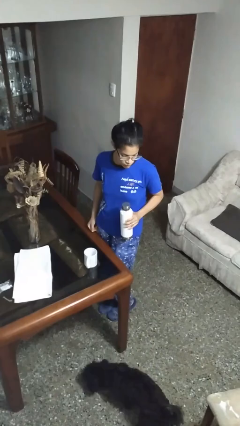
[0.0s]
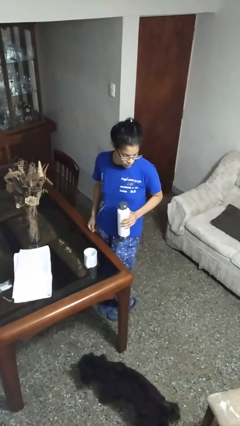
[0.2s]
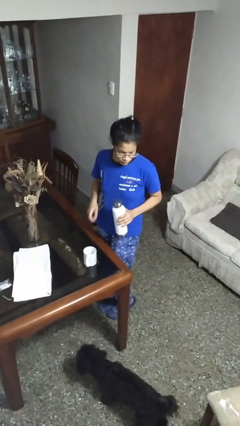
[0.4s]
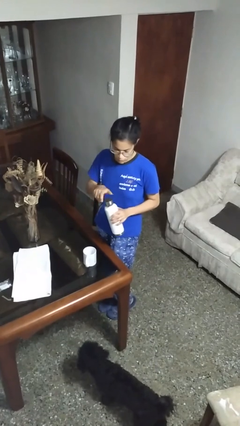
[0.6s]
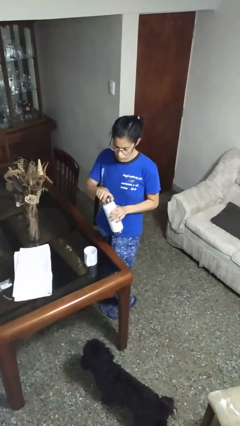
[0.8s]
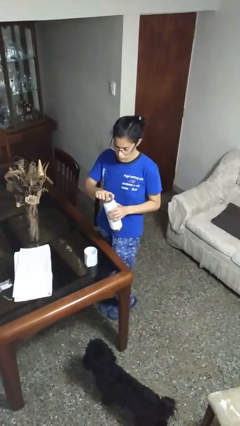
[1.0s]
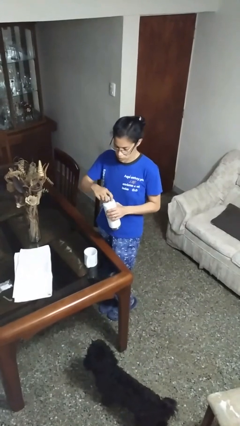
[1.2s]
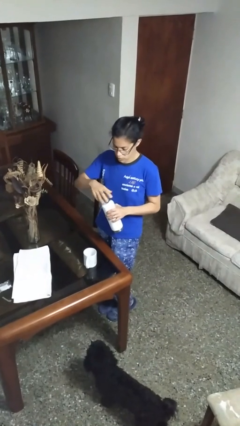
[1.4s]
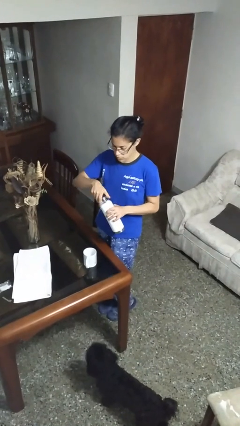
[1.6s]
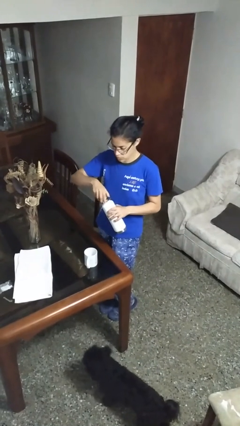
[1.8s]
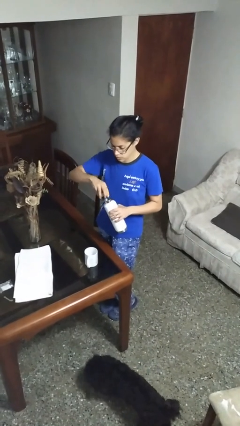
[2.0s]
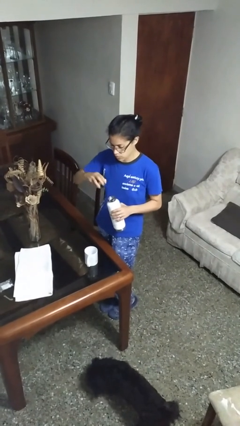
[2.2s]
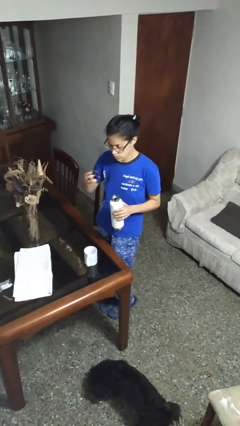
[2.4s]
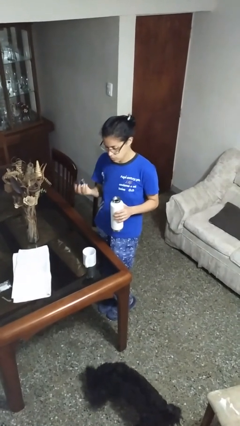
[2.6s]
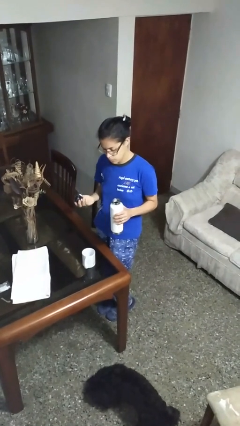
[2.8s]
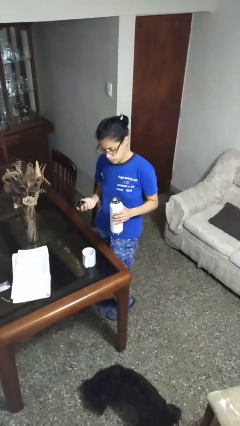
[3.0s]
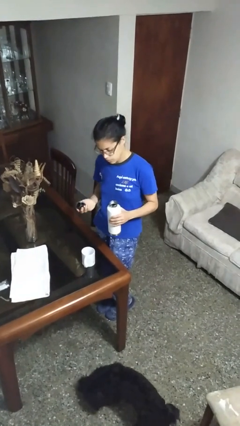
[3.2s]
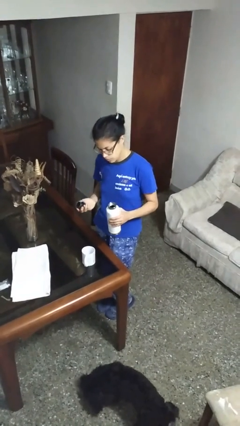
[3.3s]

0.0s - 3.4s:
person unscrews lid from bottle

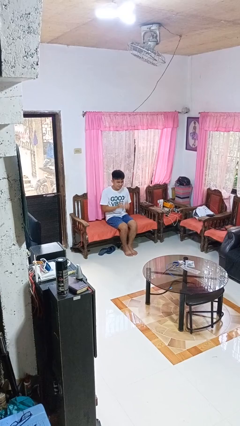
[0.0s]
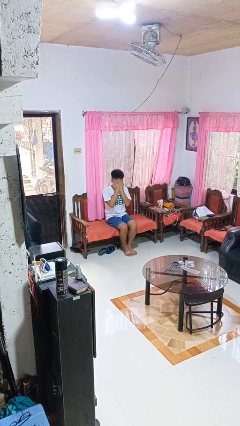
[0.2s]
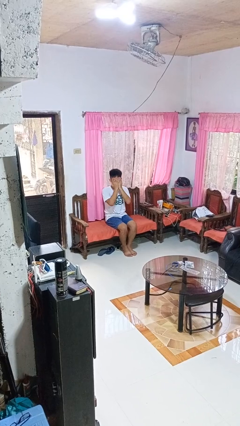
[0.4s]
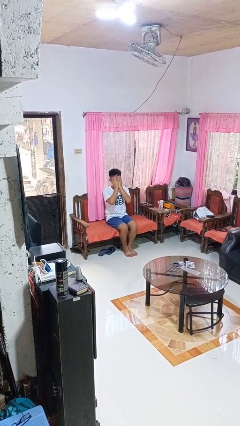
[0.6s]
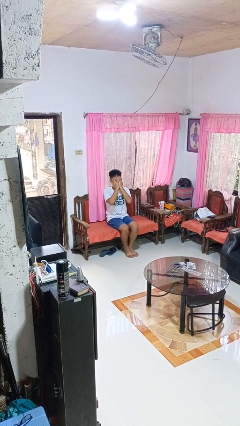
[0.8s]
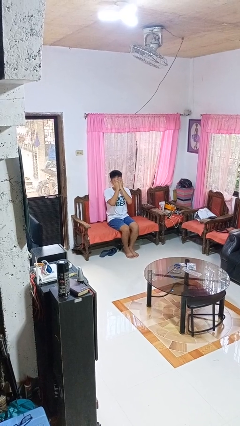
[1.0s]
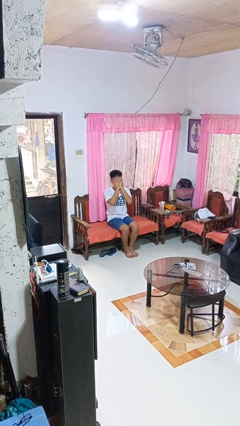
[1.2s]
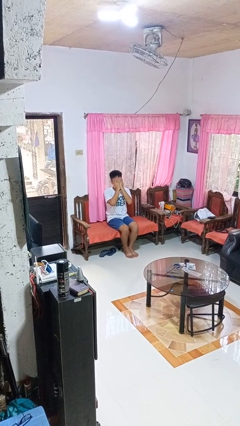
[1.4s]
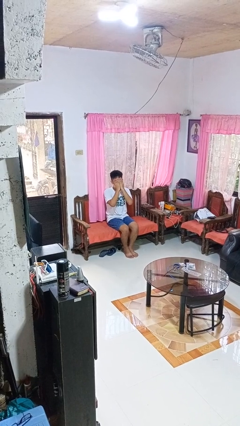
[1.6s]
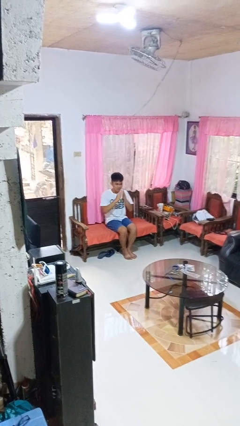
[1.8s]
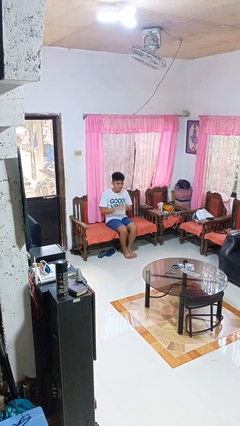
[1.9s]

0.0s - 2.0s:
person covers face with hands

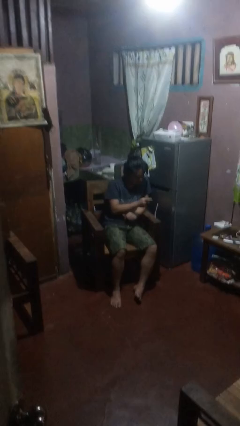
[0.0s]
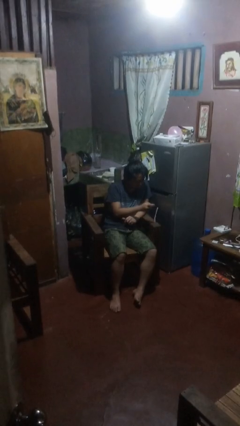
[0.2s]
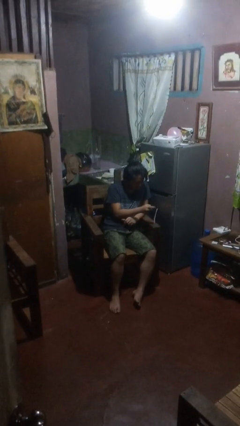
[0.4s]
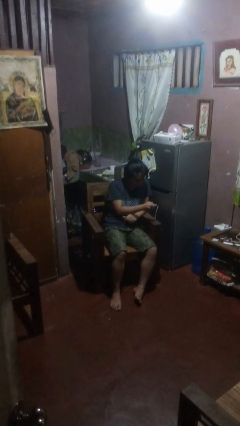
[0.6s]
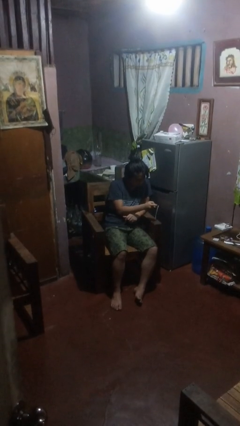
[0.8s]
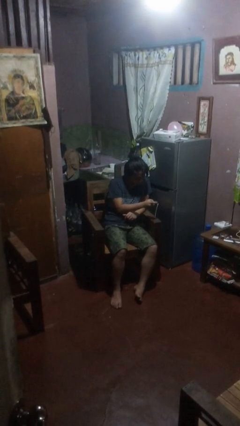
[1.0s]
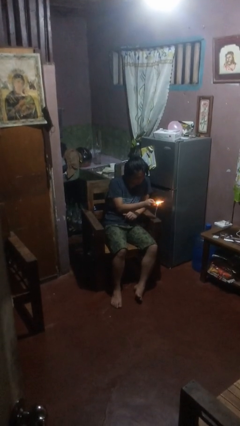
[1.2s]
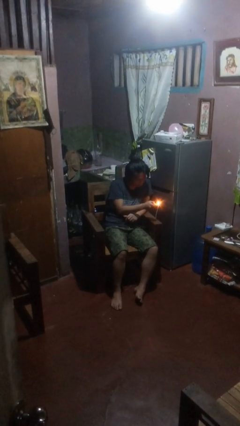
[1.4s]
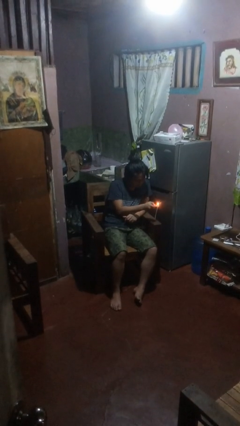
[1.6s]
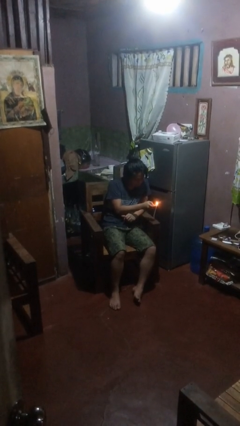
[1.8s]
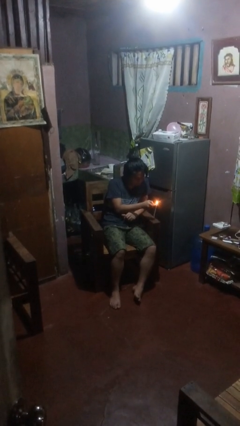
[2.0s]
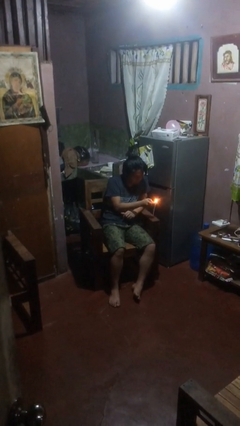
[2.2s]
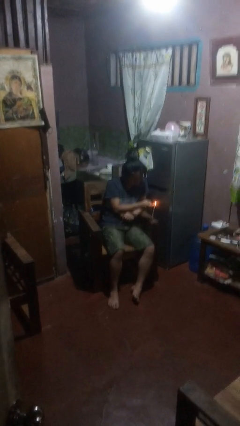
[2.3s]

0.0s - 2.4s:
person lights candle

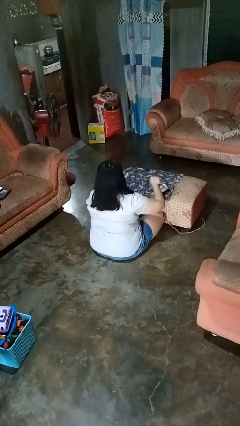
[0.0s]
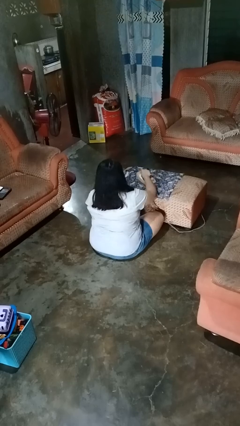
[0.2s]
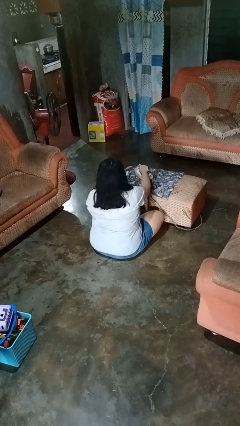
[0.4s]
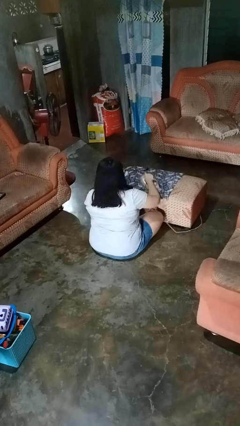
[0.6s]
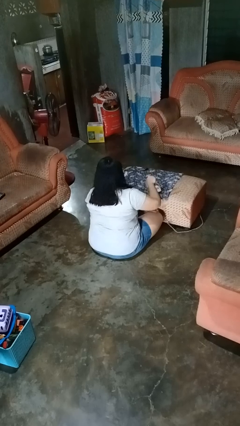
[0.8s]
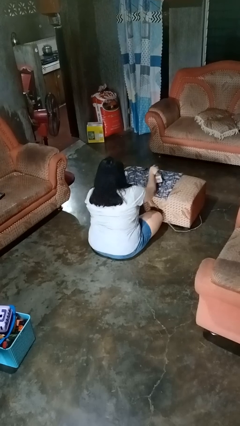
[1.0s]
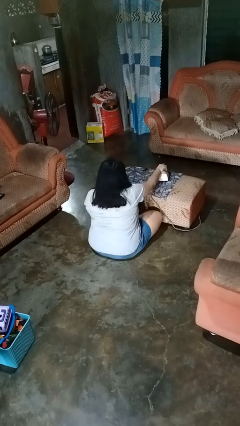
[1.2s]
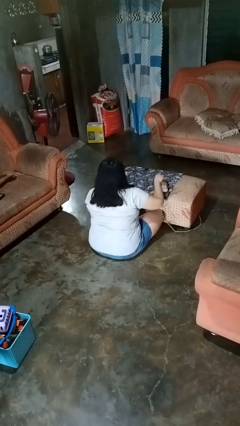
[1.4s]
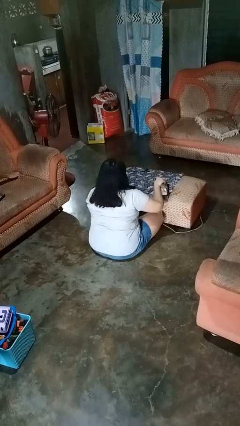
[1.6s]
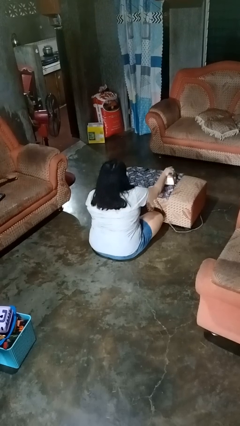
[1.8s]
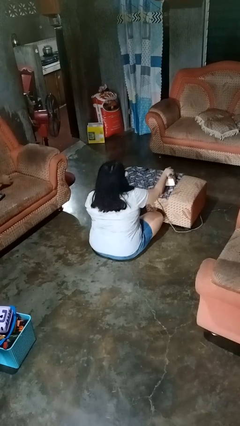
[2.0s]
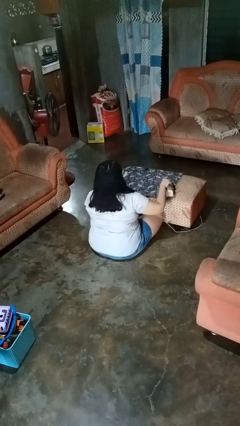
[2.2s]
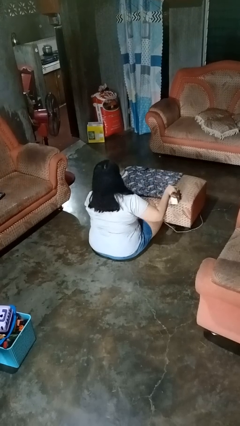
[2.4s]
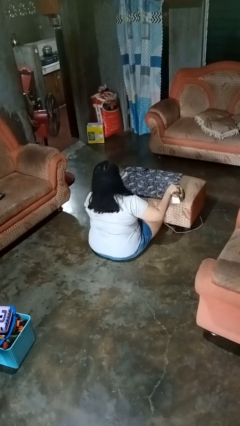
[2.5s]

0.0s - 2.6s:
person irons clothes

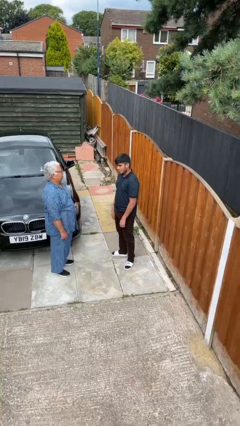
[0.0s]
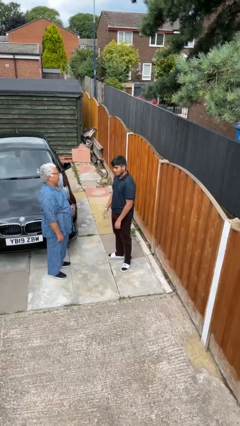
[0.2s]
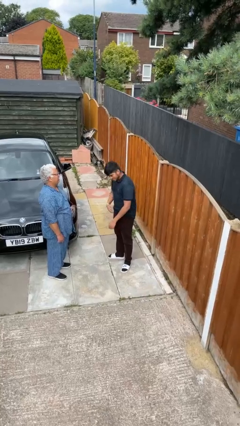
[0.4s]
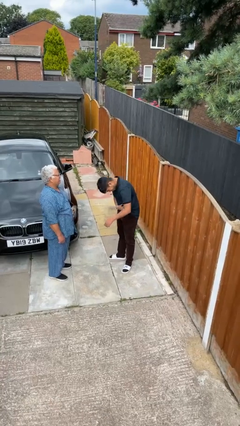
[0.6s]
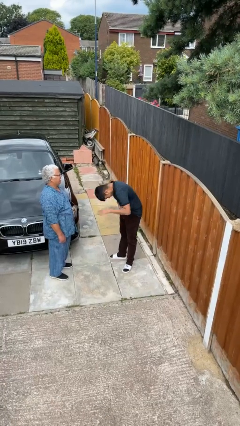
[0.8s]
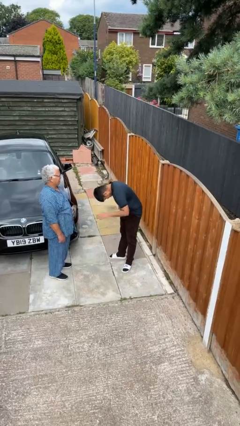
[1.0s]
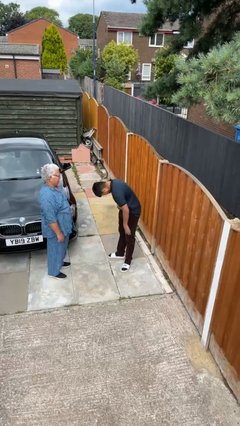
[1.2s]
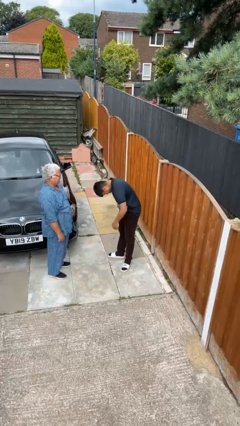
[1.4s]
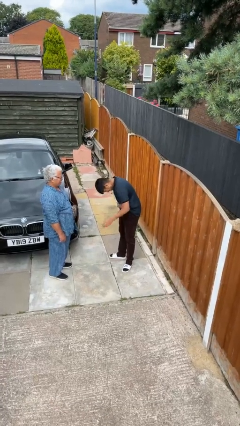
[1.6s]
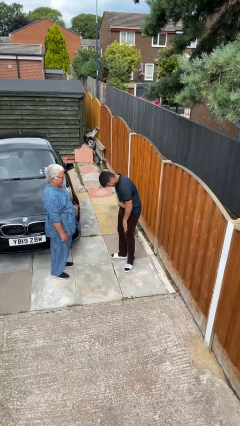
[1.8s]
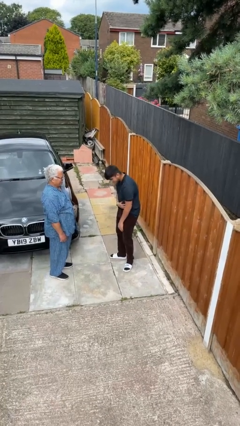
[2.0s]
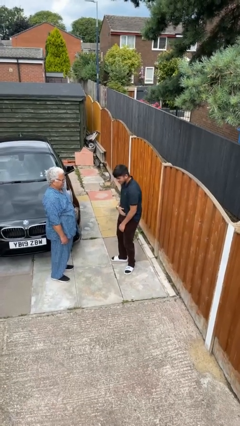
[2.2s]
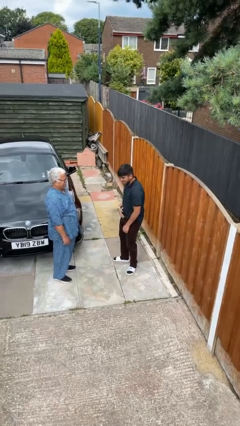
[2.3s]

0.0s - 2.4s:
person laughs with person

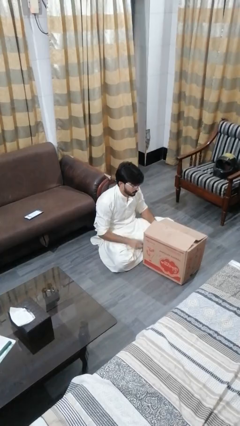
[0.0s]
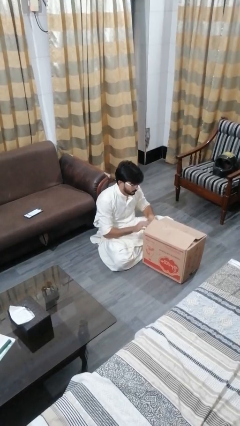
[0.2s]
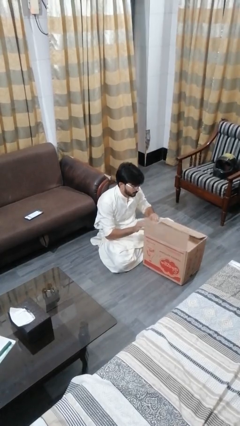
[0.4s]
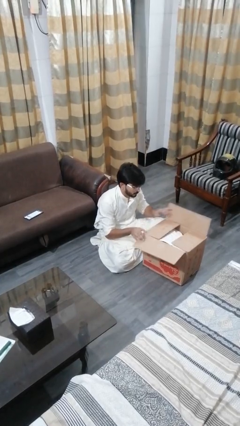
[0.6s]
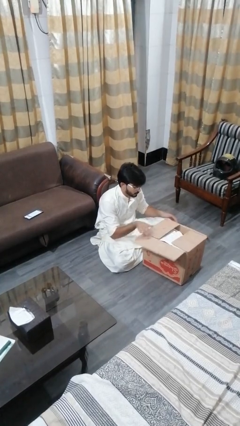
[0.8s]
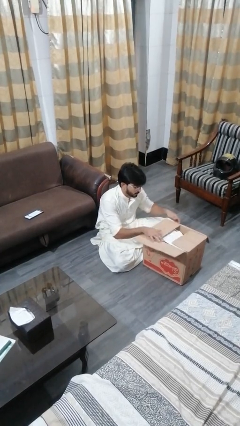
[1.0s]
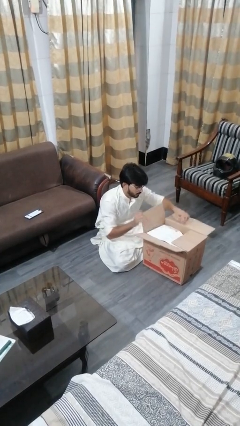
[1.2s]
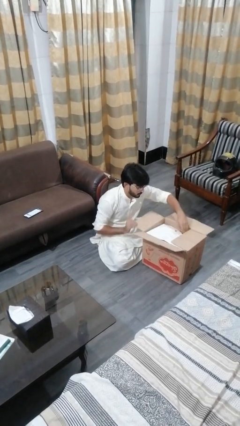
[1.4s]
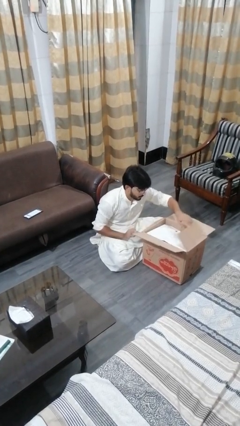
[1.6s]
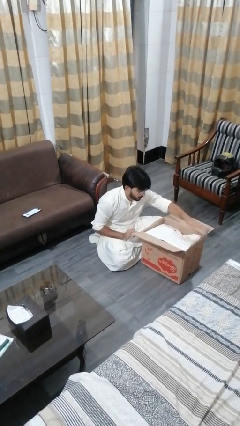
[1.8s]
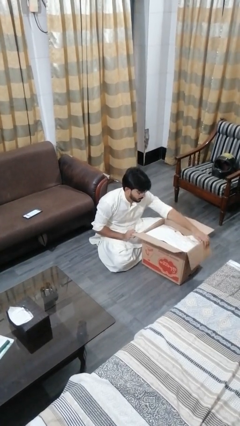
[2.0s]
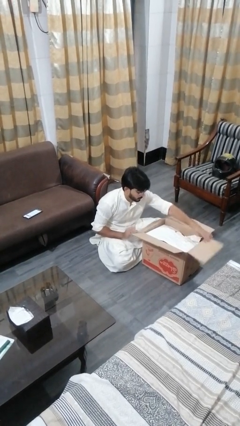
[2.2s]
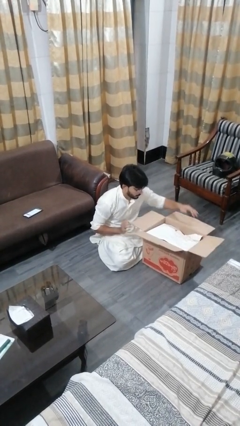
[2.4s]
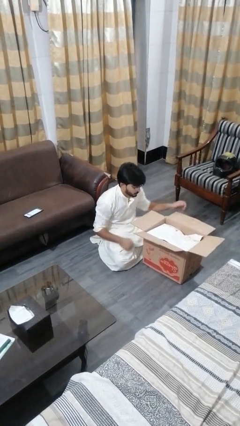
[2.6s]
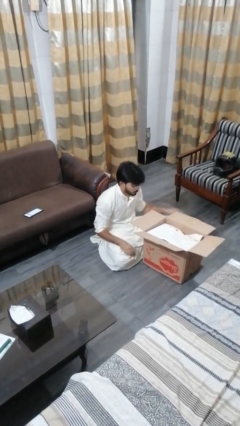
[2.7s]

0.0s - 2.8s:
person opens box

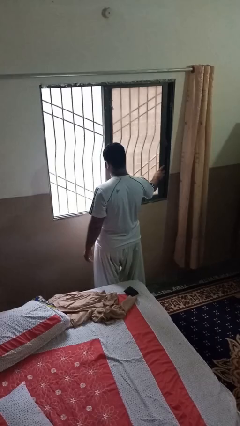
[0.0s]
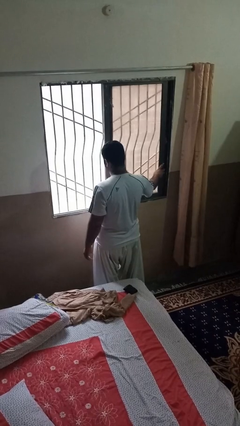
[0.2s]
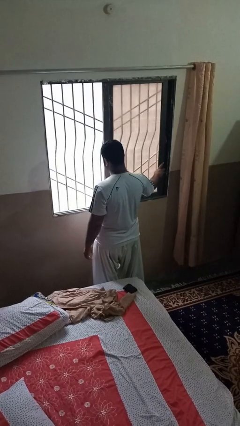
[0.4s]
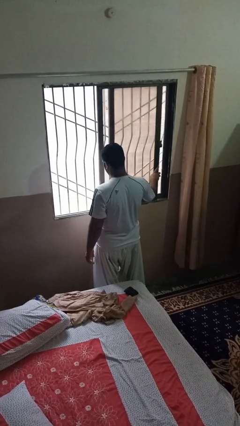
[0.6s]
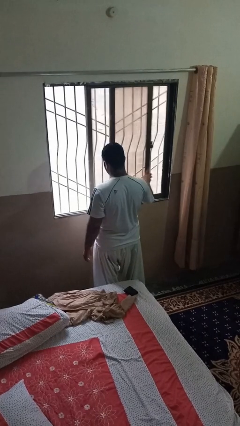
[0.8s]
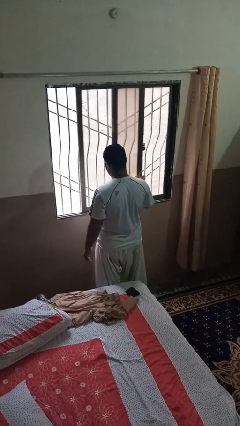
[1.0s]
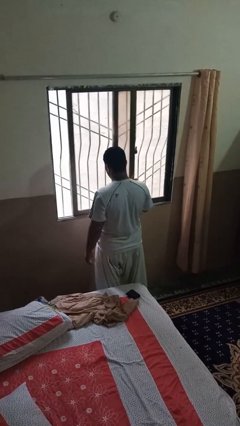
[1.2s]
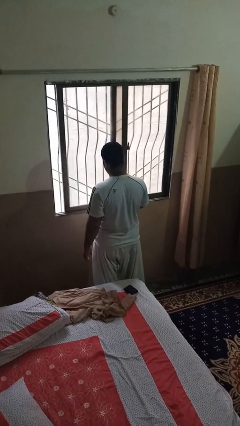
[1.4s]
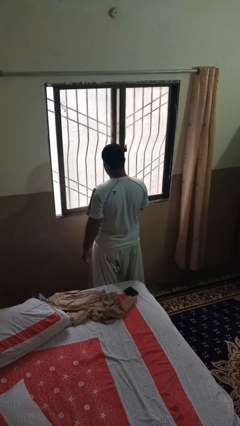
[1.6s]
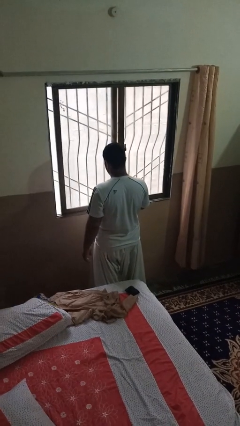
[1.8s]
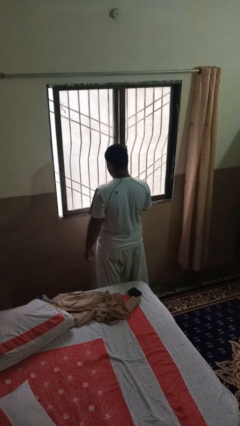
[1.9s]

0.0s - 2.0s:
person closes home window
